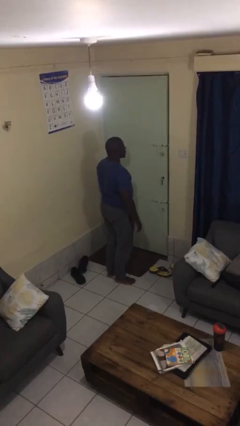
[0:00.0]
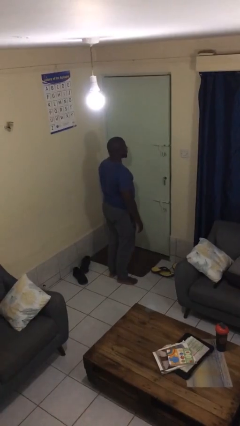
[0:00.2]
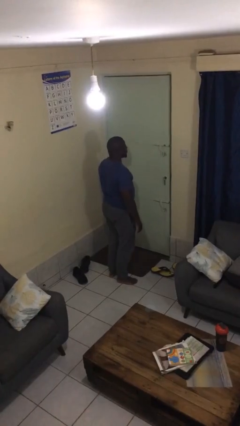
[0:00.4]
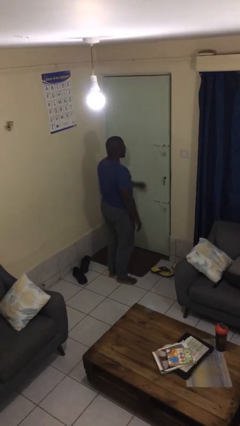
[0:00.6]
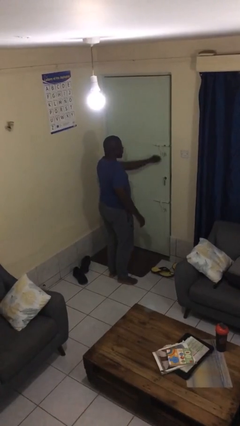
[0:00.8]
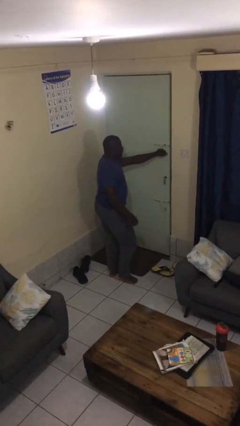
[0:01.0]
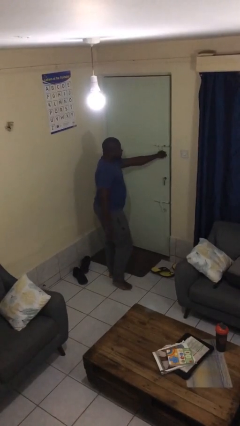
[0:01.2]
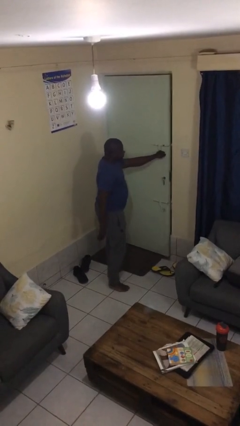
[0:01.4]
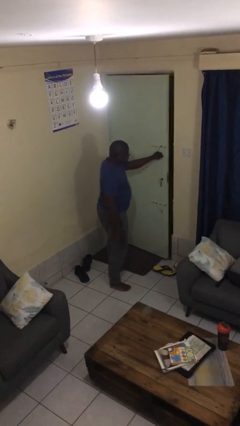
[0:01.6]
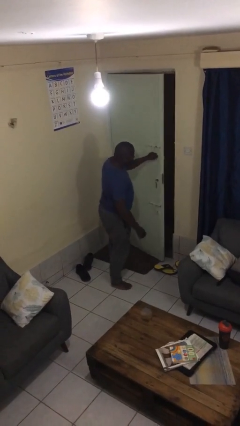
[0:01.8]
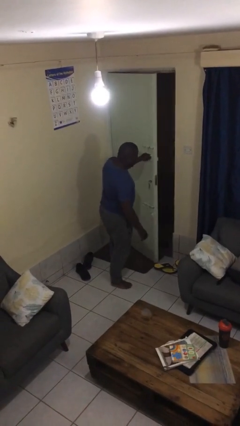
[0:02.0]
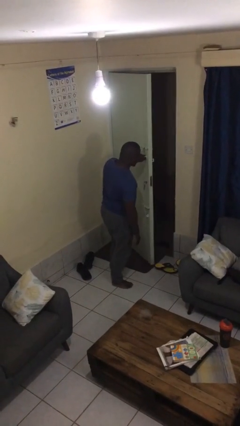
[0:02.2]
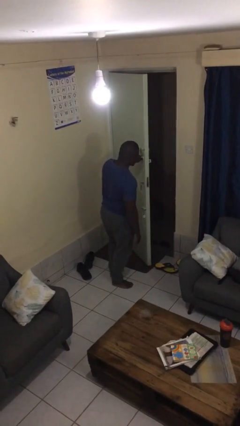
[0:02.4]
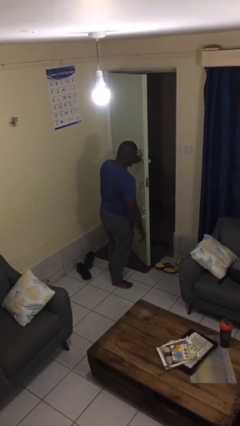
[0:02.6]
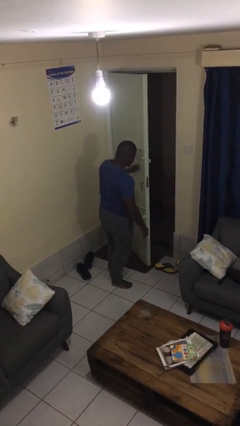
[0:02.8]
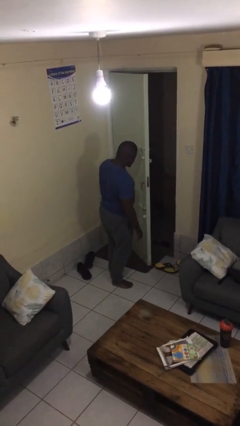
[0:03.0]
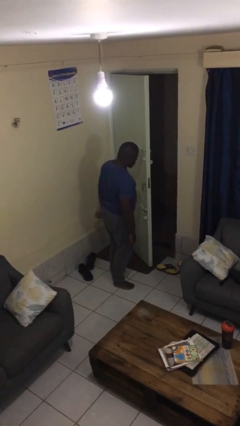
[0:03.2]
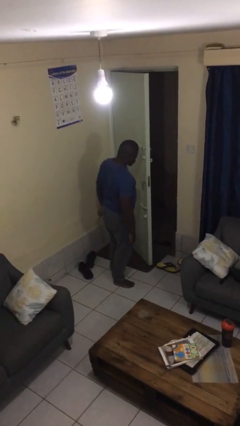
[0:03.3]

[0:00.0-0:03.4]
person opens facility door

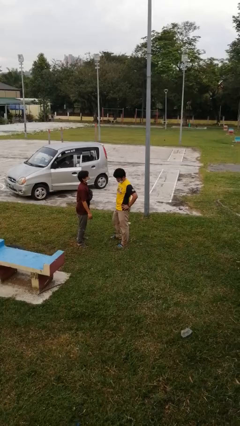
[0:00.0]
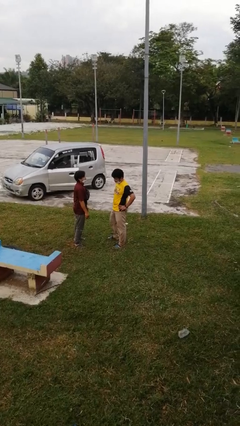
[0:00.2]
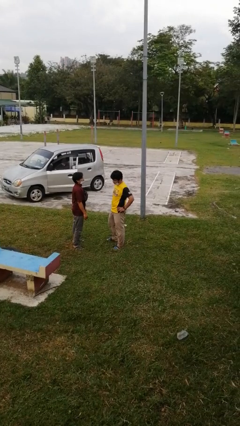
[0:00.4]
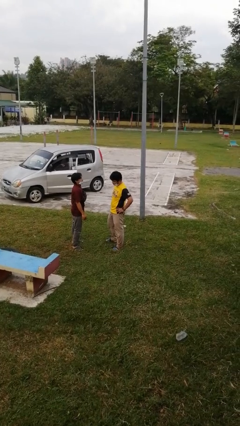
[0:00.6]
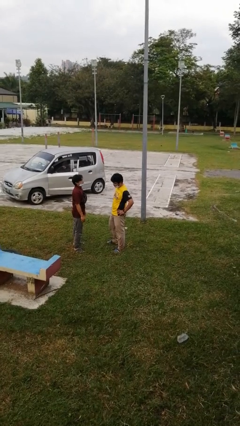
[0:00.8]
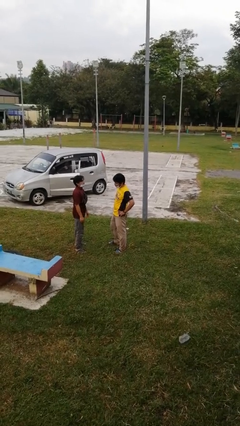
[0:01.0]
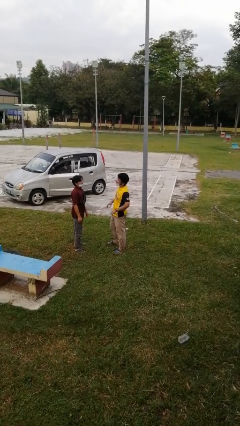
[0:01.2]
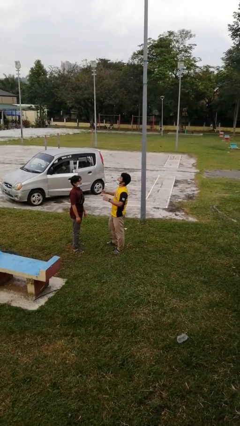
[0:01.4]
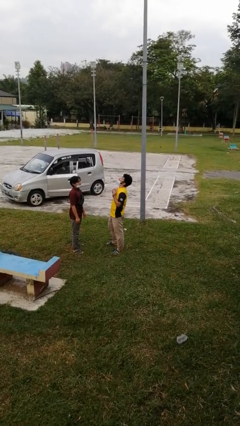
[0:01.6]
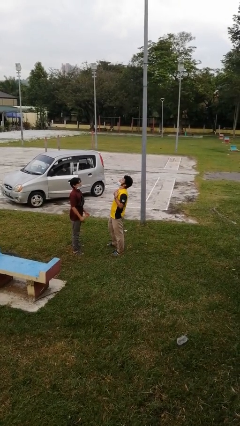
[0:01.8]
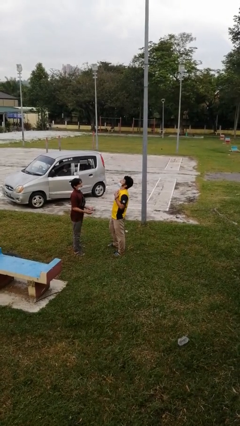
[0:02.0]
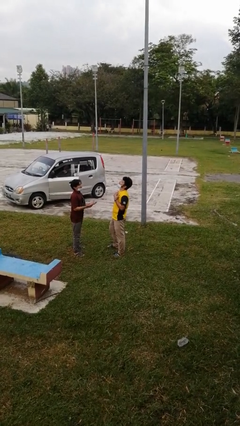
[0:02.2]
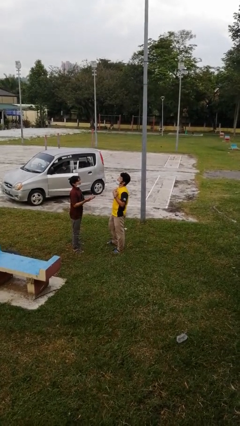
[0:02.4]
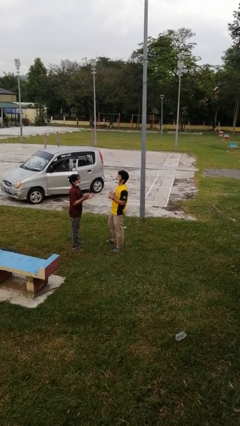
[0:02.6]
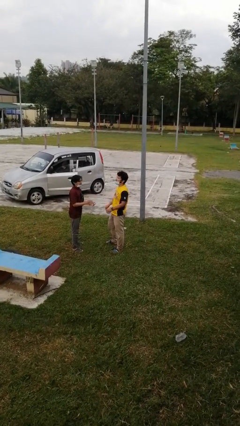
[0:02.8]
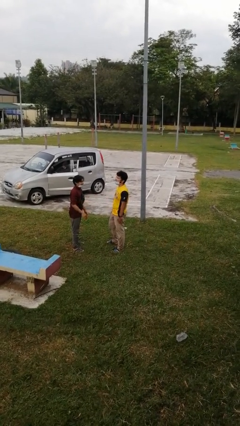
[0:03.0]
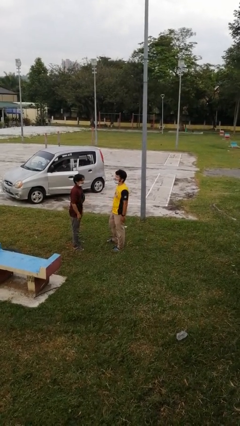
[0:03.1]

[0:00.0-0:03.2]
person laughs with person

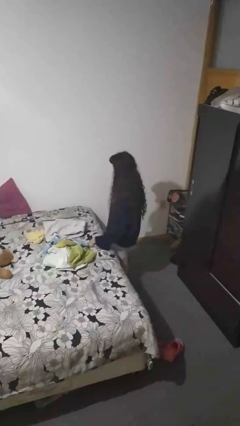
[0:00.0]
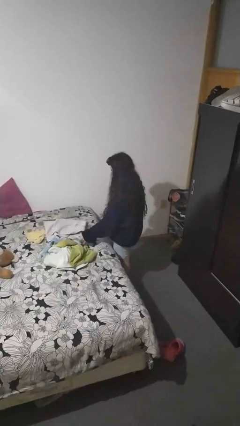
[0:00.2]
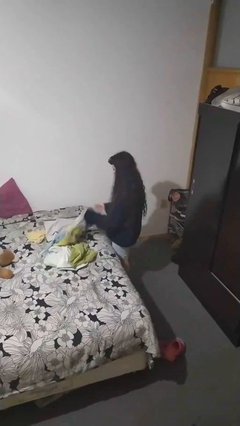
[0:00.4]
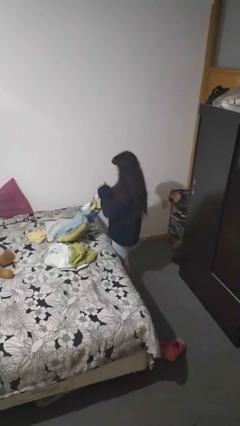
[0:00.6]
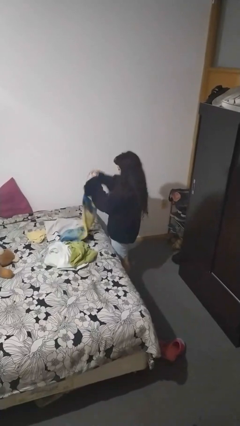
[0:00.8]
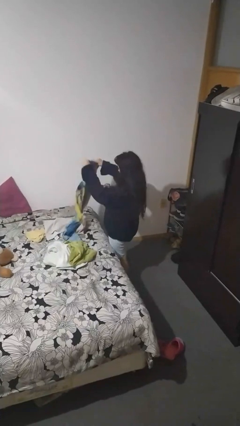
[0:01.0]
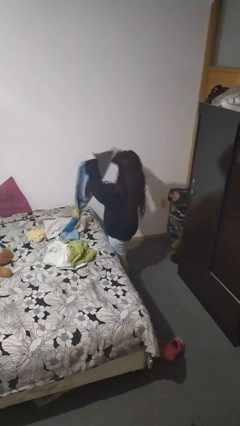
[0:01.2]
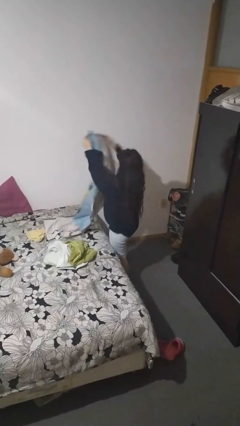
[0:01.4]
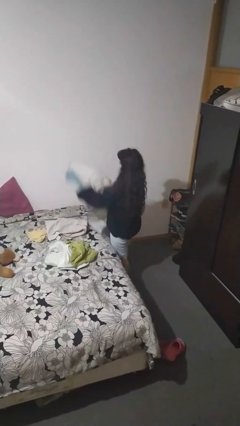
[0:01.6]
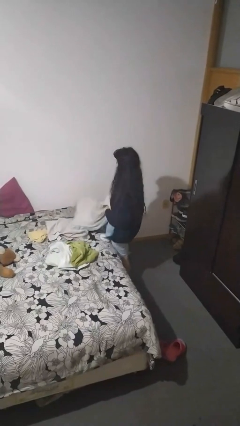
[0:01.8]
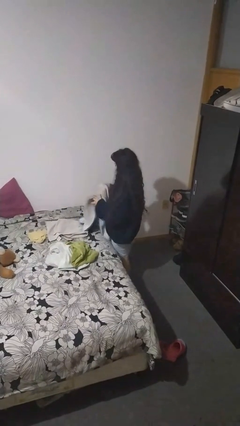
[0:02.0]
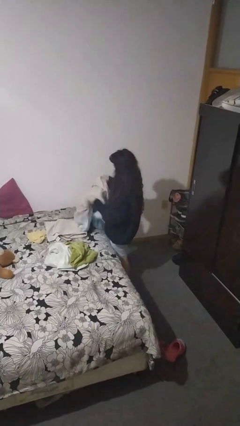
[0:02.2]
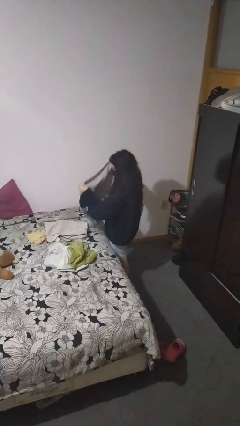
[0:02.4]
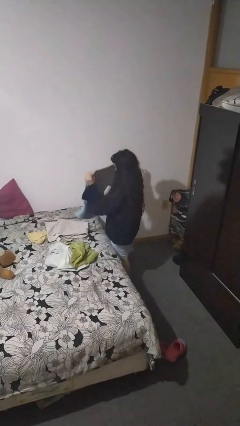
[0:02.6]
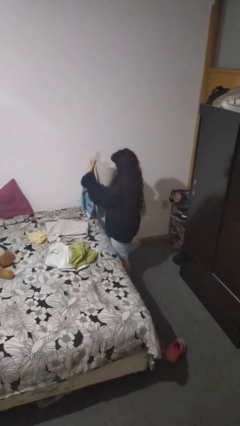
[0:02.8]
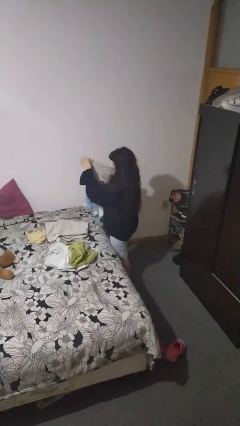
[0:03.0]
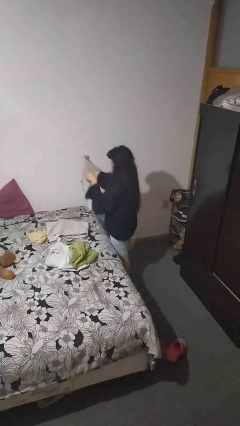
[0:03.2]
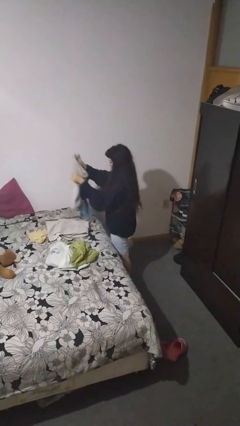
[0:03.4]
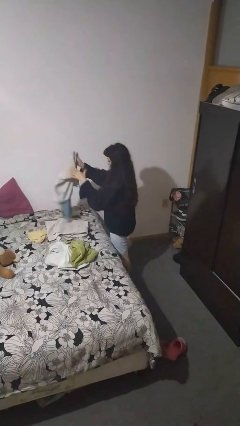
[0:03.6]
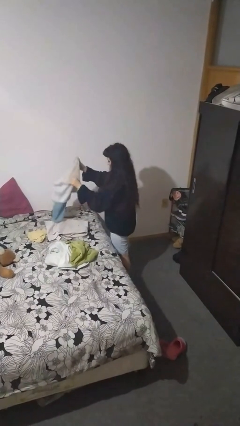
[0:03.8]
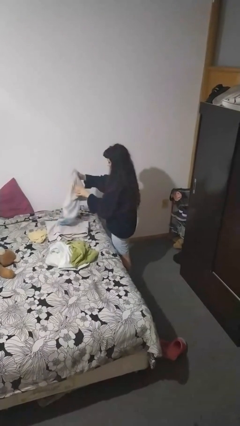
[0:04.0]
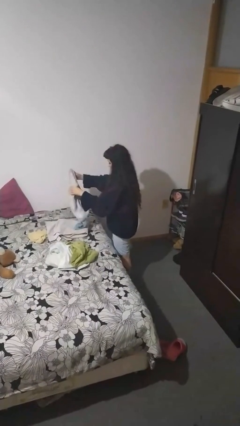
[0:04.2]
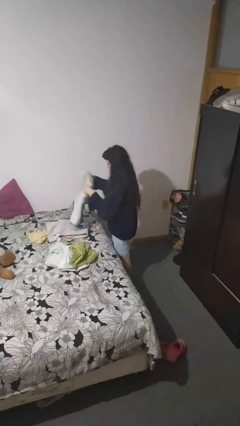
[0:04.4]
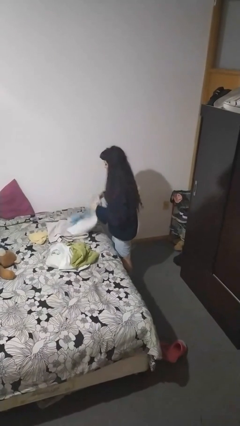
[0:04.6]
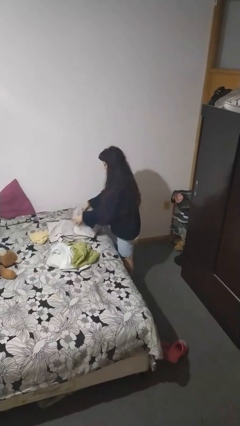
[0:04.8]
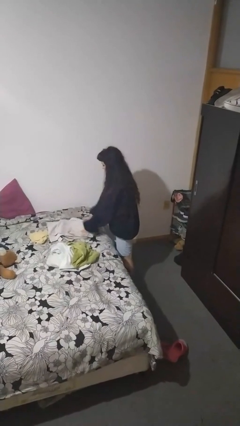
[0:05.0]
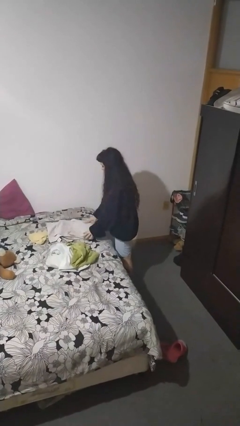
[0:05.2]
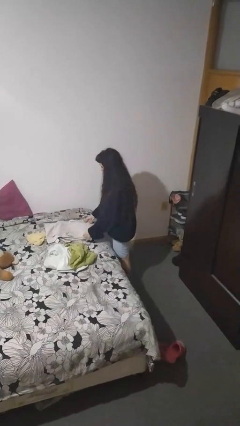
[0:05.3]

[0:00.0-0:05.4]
person folds towel

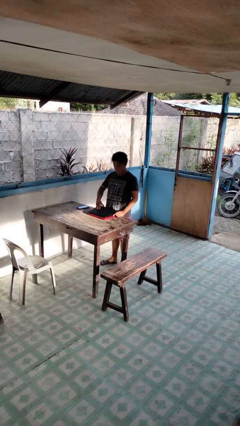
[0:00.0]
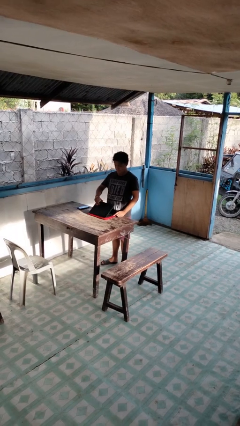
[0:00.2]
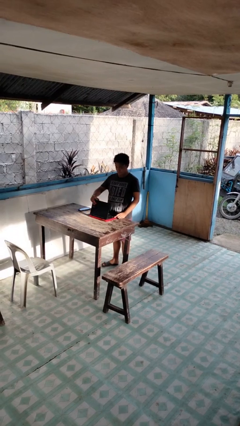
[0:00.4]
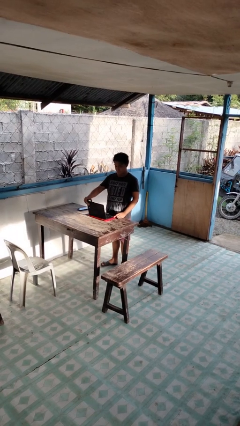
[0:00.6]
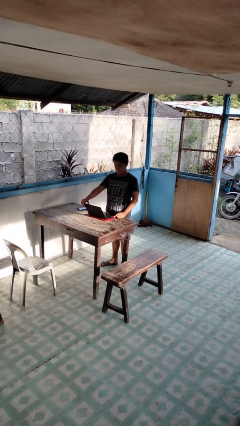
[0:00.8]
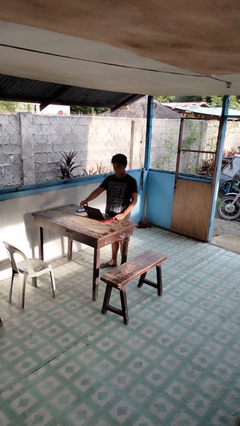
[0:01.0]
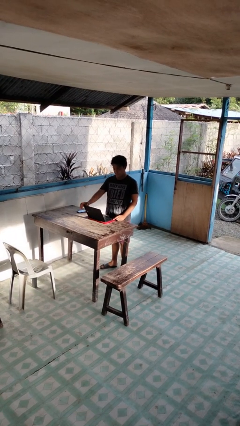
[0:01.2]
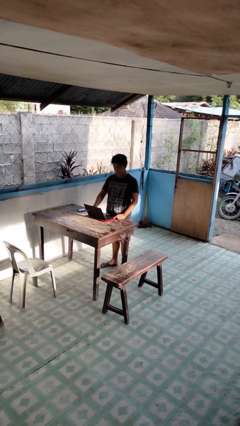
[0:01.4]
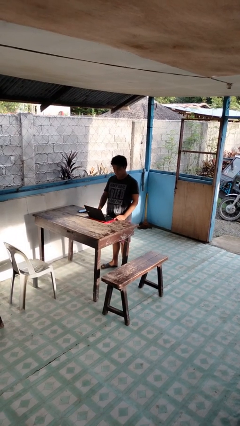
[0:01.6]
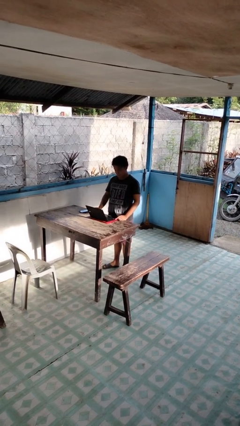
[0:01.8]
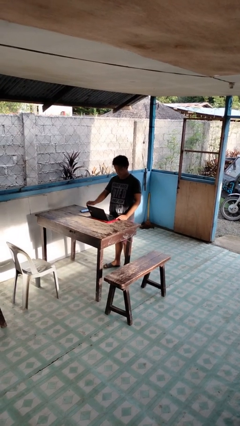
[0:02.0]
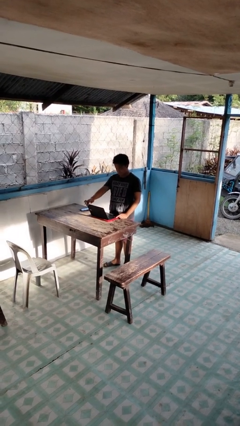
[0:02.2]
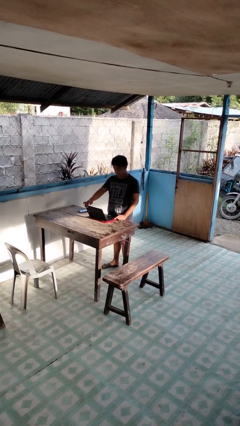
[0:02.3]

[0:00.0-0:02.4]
person opens laptop

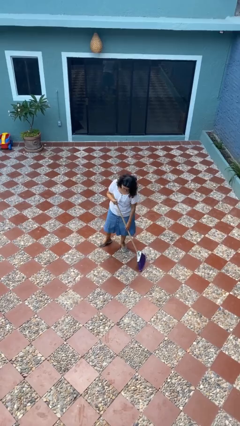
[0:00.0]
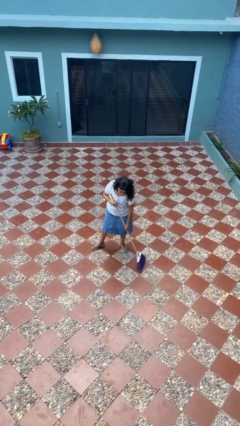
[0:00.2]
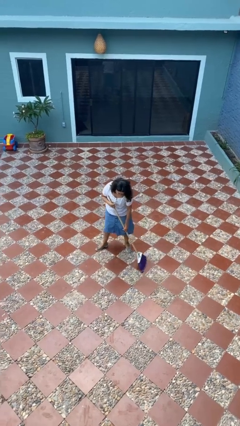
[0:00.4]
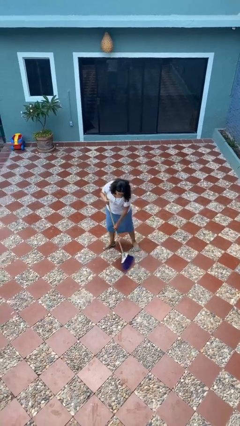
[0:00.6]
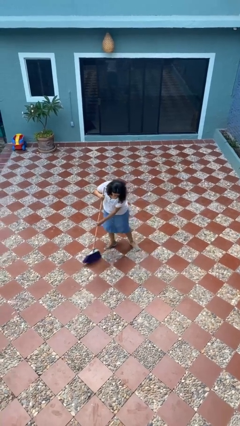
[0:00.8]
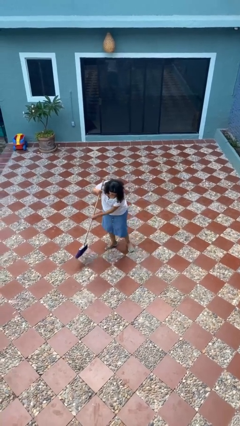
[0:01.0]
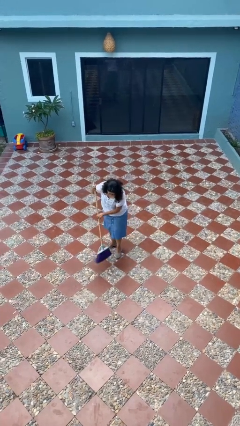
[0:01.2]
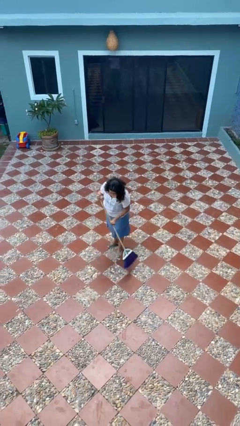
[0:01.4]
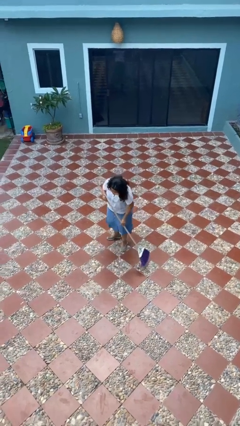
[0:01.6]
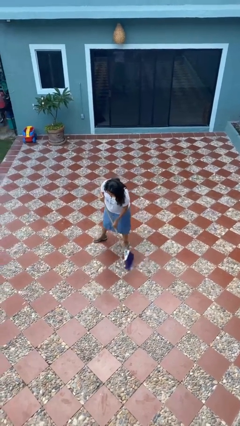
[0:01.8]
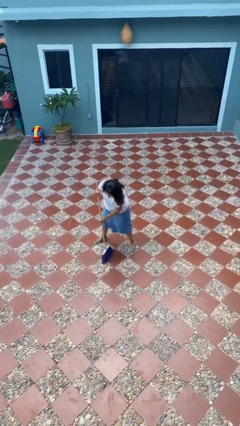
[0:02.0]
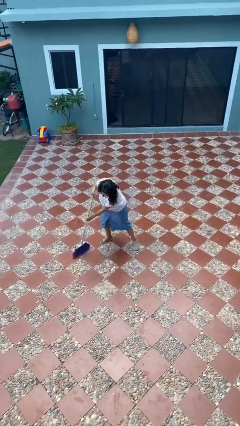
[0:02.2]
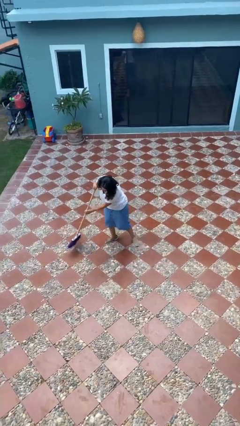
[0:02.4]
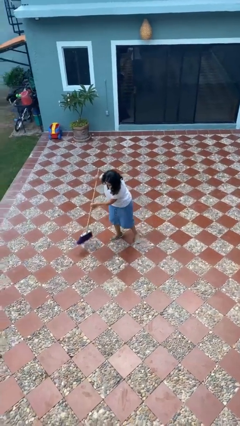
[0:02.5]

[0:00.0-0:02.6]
person sweeps floor

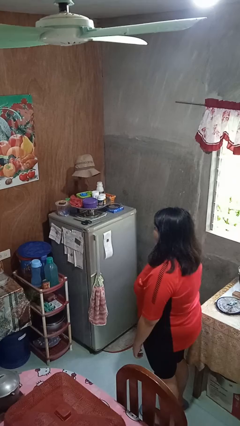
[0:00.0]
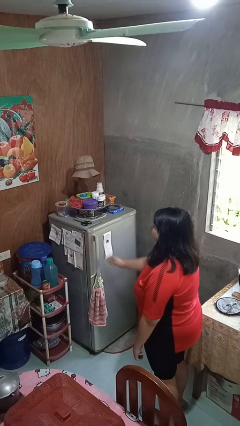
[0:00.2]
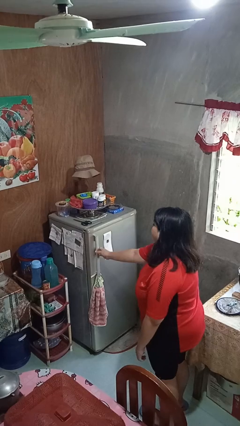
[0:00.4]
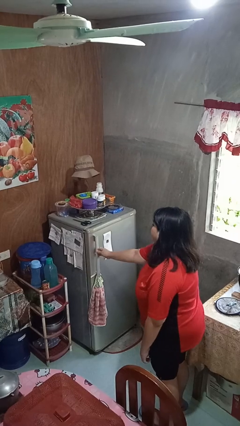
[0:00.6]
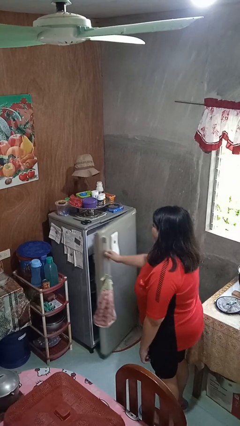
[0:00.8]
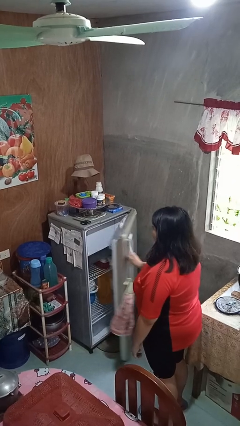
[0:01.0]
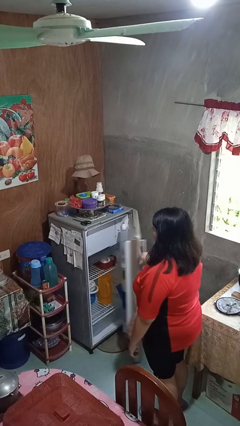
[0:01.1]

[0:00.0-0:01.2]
person opens refrigerator
